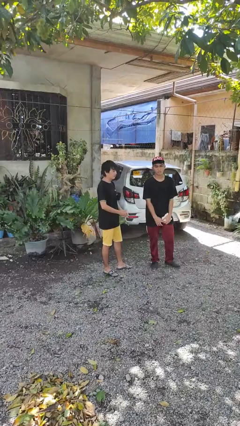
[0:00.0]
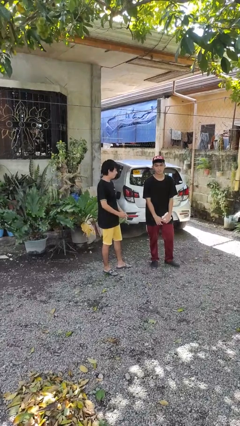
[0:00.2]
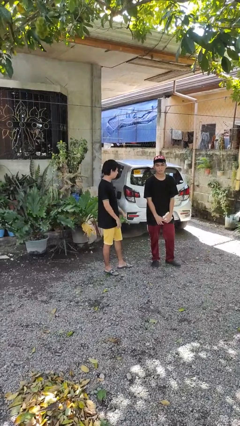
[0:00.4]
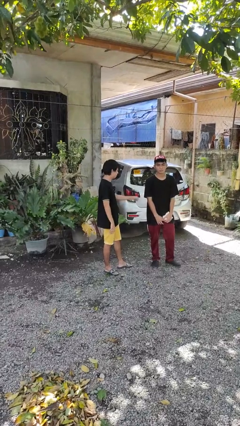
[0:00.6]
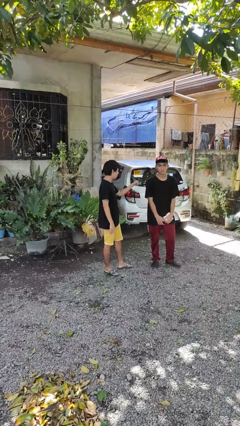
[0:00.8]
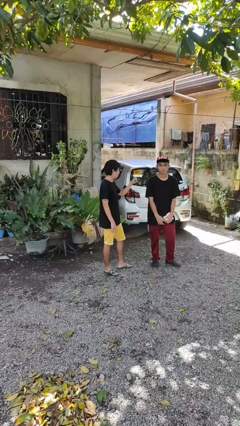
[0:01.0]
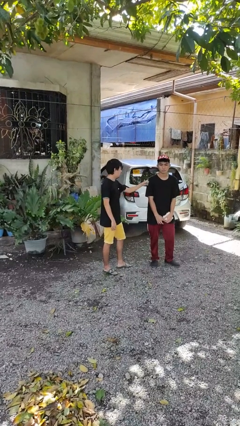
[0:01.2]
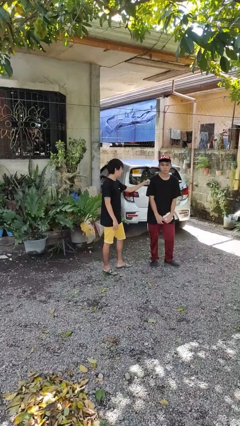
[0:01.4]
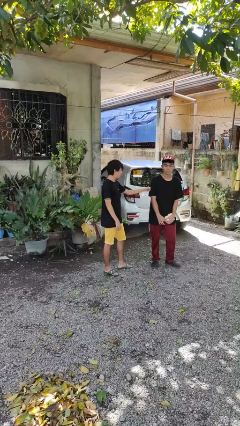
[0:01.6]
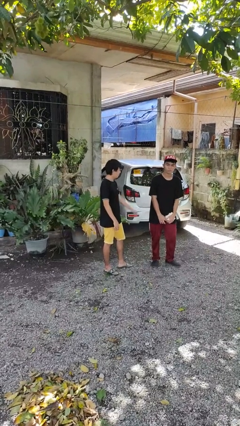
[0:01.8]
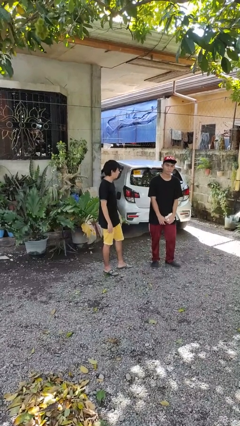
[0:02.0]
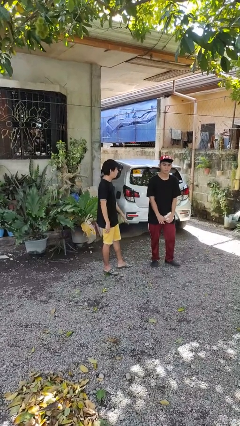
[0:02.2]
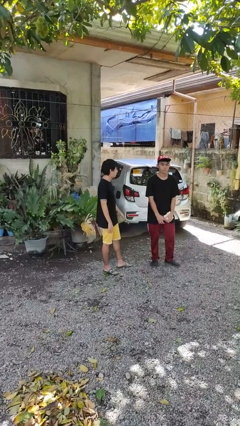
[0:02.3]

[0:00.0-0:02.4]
person pounds shoulders of person

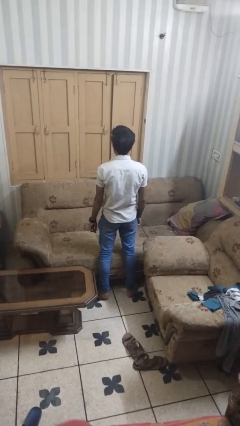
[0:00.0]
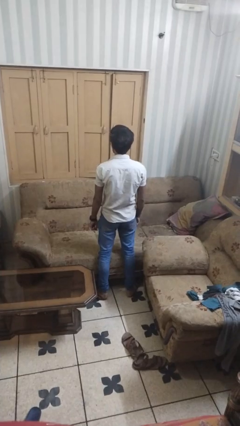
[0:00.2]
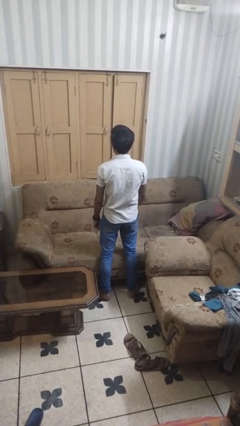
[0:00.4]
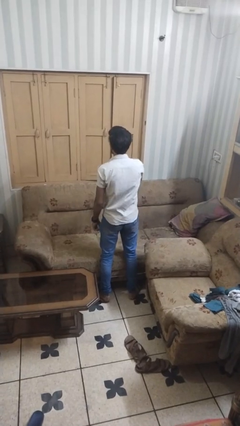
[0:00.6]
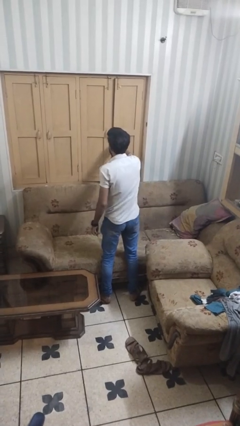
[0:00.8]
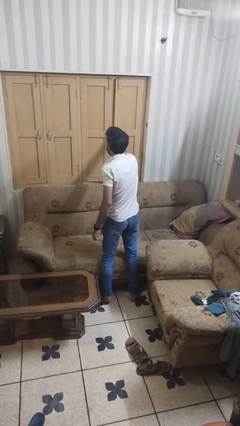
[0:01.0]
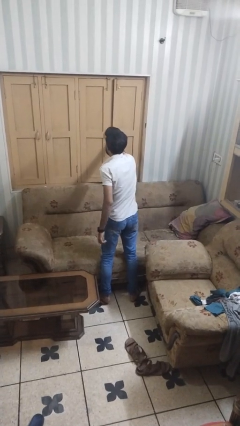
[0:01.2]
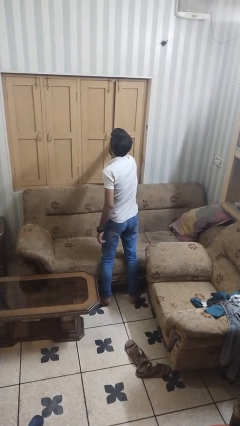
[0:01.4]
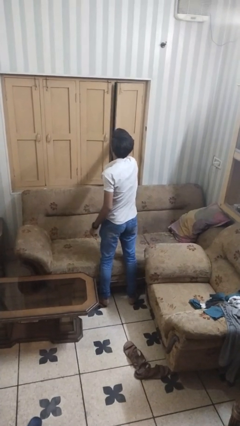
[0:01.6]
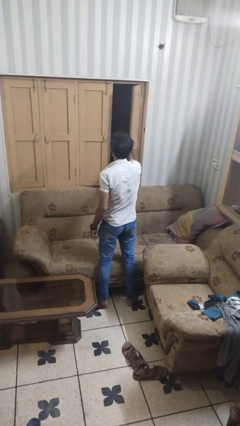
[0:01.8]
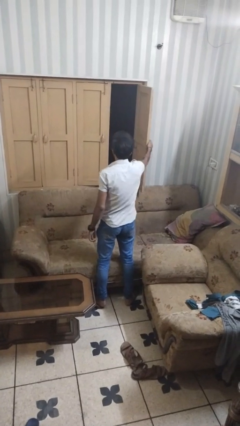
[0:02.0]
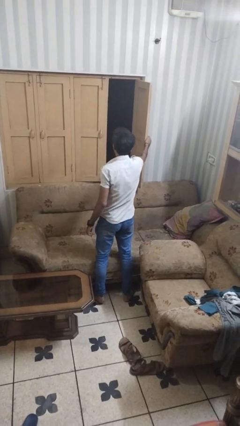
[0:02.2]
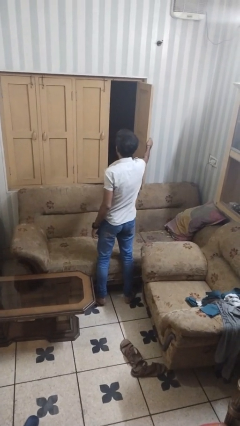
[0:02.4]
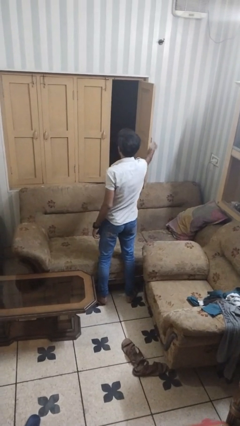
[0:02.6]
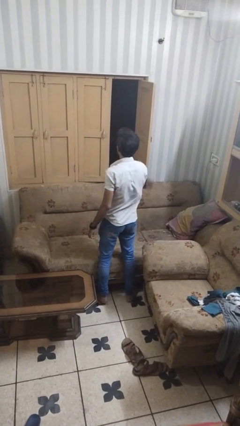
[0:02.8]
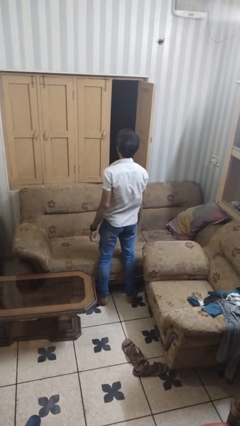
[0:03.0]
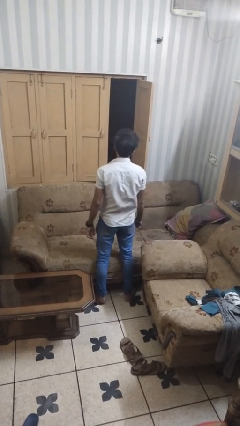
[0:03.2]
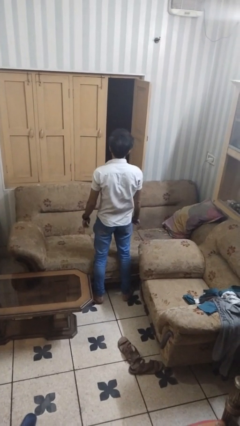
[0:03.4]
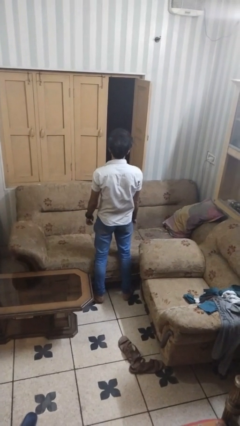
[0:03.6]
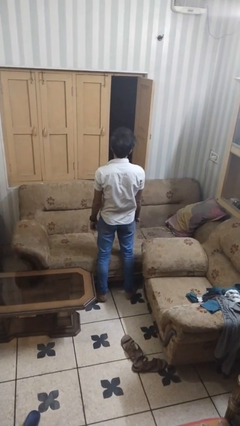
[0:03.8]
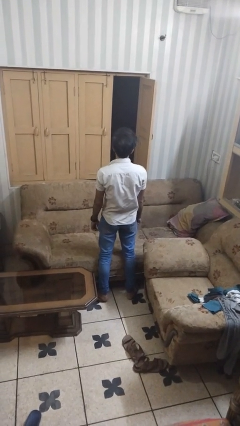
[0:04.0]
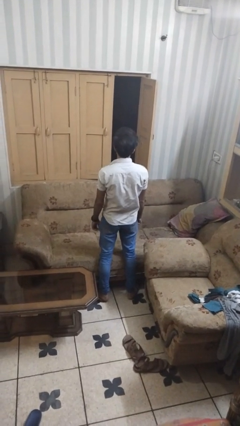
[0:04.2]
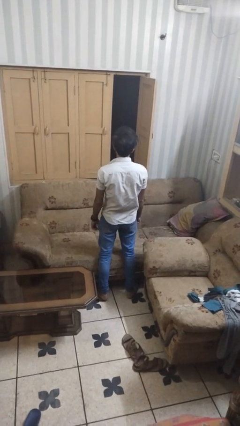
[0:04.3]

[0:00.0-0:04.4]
person opens home window

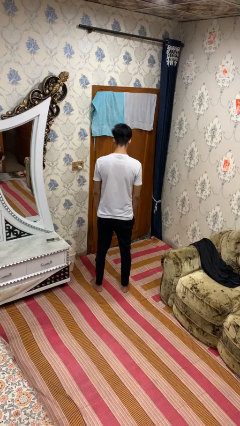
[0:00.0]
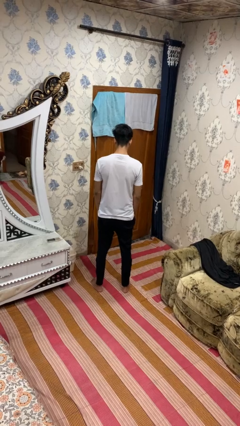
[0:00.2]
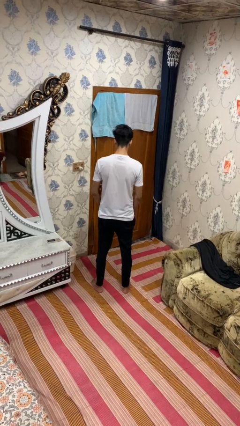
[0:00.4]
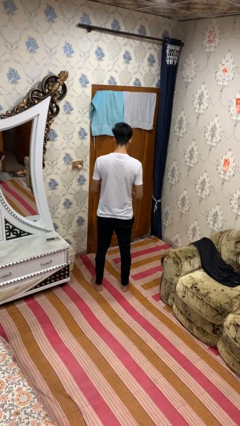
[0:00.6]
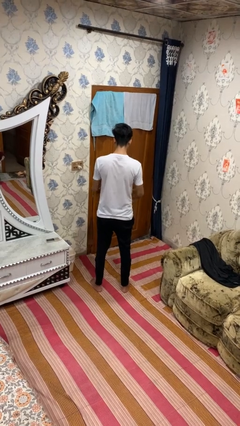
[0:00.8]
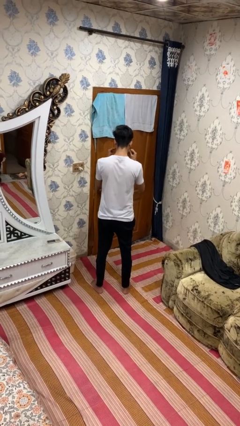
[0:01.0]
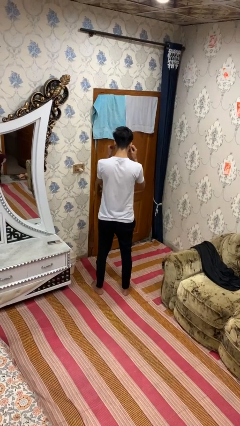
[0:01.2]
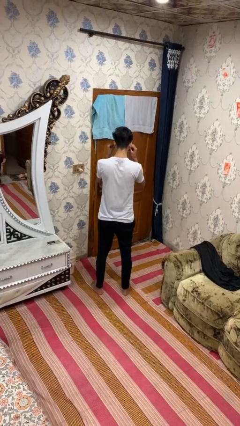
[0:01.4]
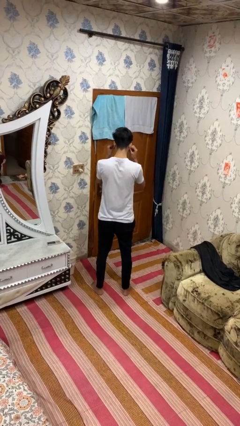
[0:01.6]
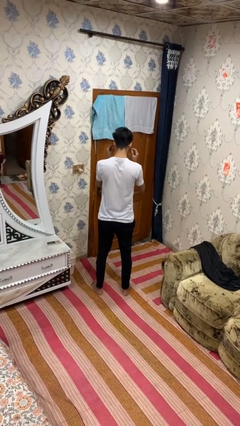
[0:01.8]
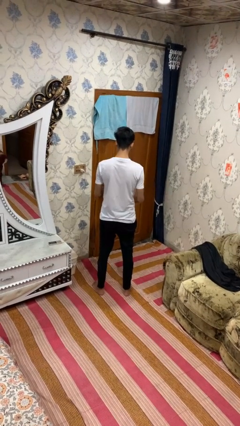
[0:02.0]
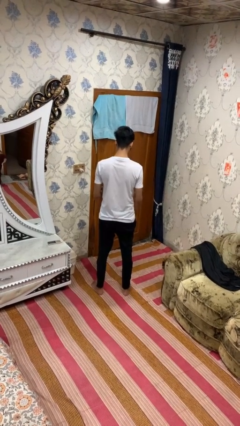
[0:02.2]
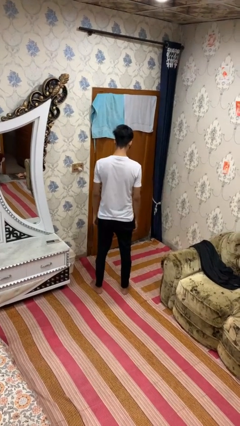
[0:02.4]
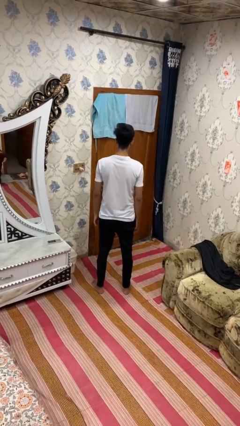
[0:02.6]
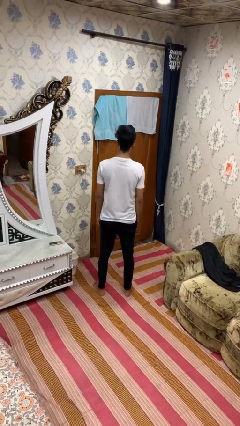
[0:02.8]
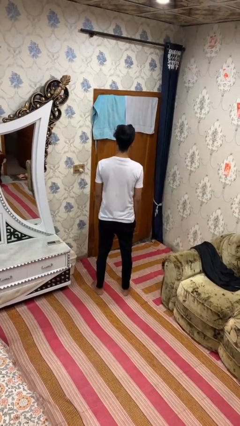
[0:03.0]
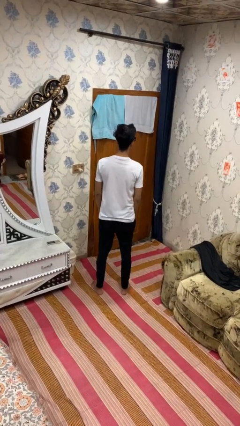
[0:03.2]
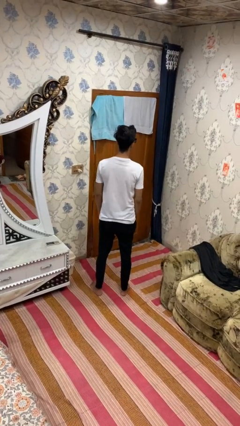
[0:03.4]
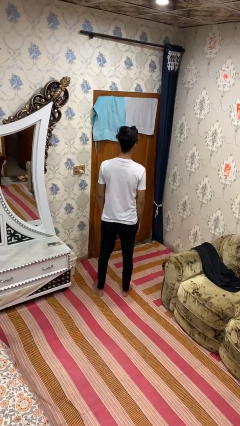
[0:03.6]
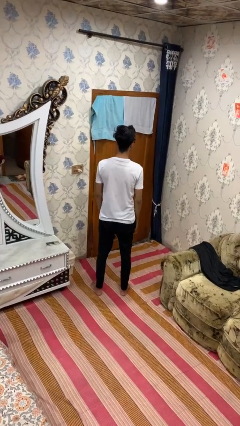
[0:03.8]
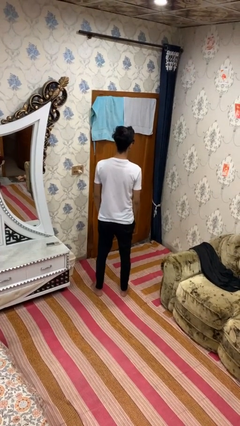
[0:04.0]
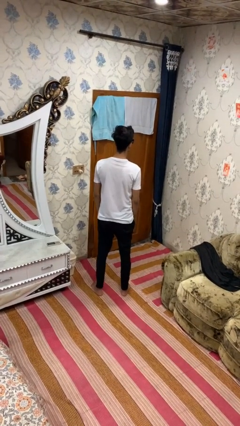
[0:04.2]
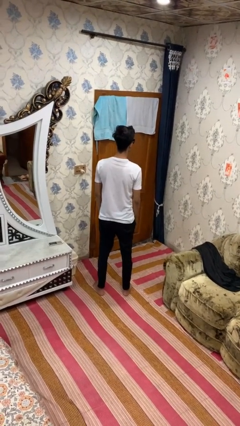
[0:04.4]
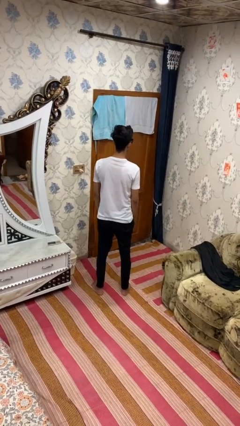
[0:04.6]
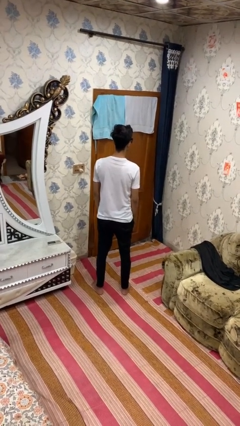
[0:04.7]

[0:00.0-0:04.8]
person puts on sunglasses

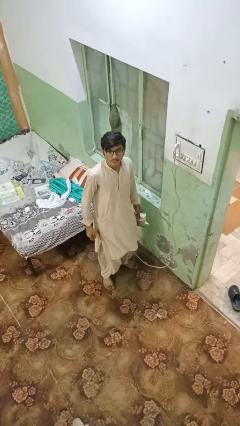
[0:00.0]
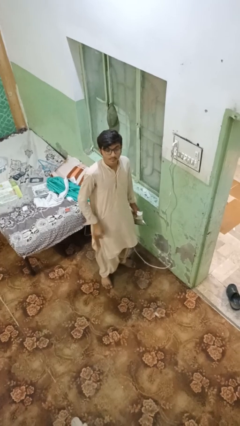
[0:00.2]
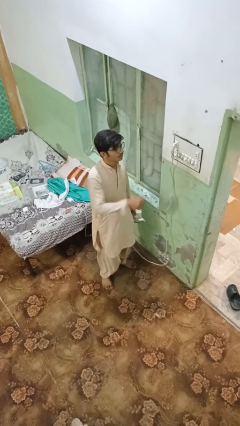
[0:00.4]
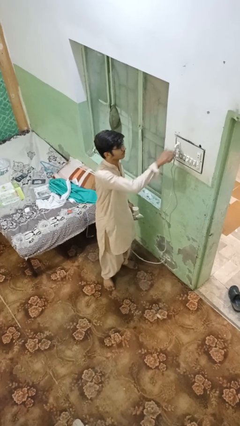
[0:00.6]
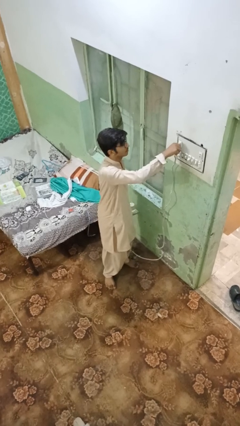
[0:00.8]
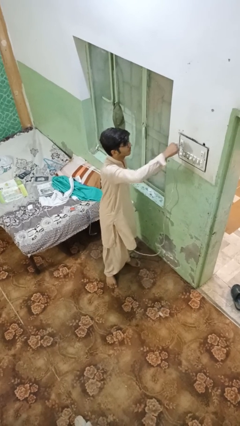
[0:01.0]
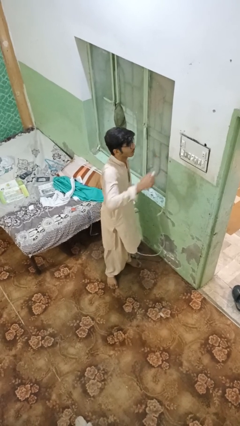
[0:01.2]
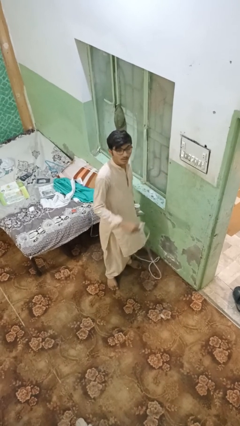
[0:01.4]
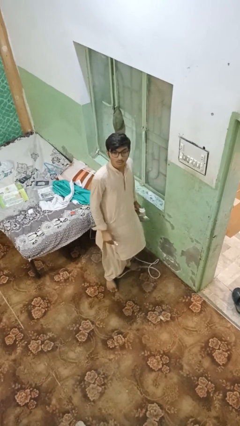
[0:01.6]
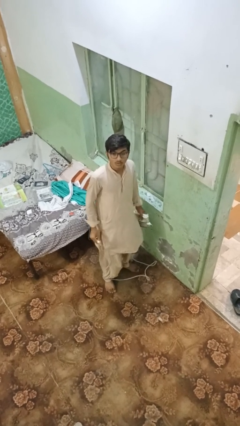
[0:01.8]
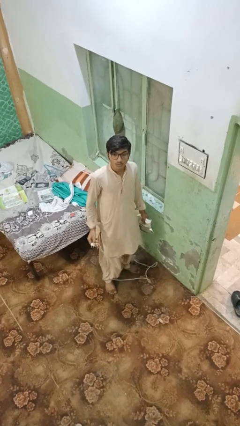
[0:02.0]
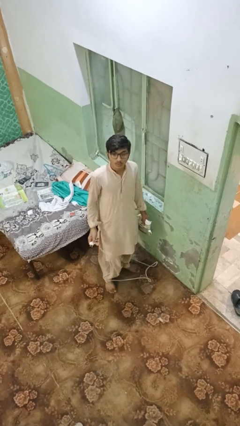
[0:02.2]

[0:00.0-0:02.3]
person unplugs from electrical socket

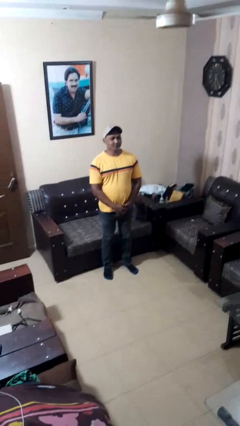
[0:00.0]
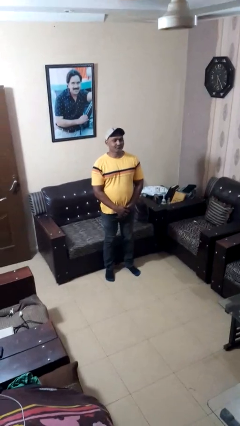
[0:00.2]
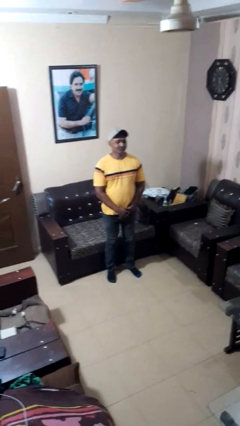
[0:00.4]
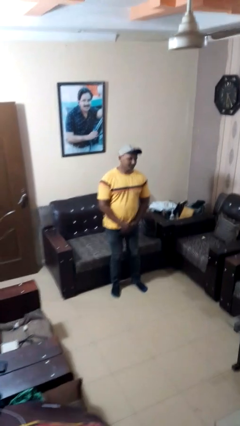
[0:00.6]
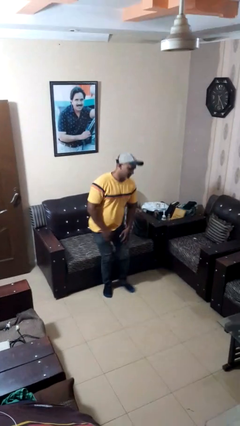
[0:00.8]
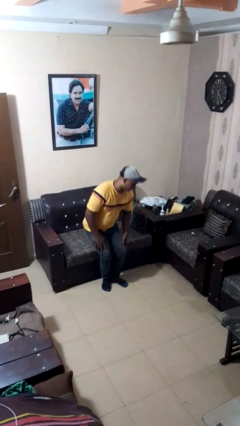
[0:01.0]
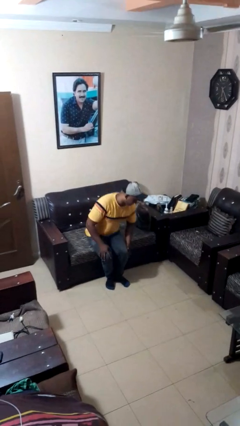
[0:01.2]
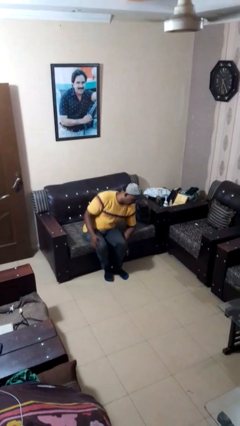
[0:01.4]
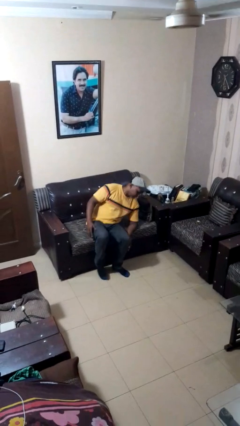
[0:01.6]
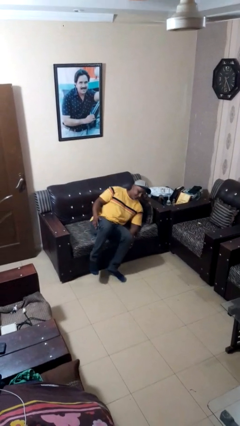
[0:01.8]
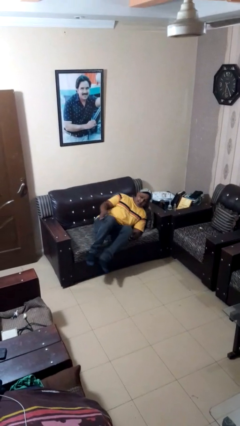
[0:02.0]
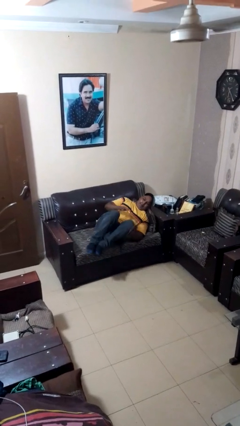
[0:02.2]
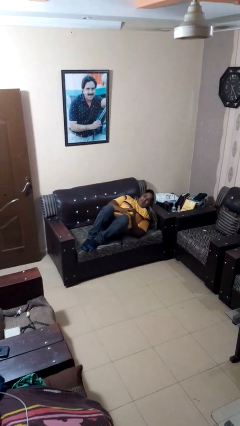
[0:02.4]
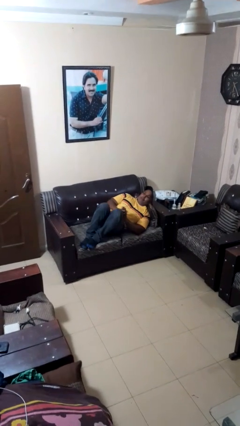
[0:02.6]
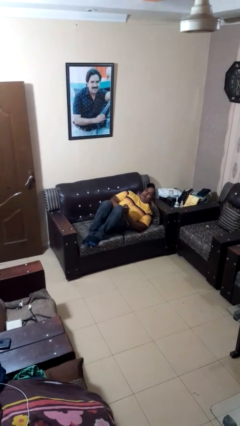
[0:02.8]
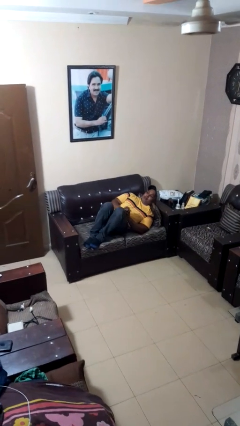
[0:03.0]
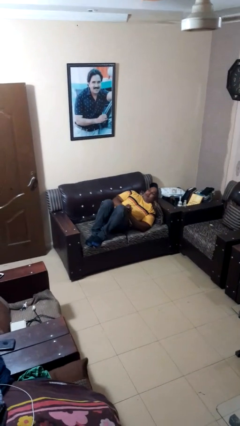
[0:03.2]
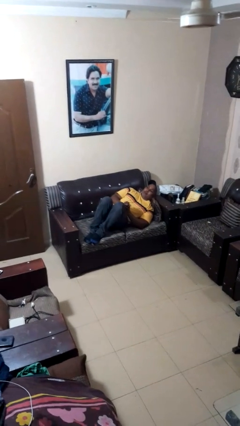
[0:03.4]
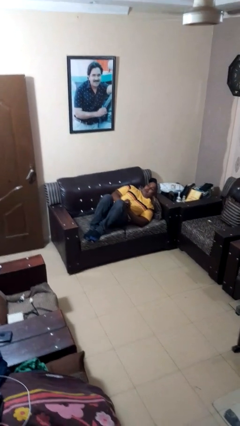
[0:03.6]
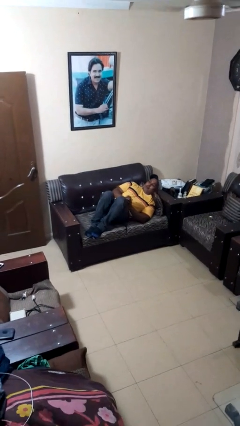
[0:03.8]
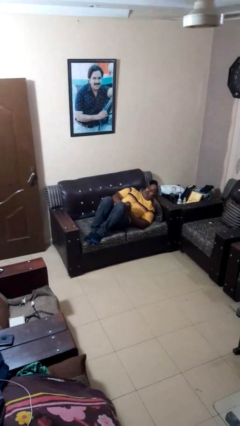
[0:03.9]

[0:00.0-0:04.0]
person lies down on couch
